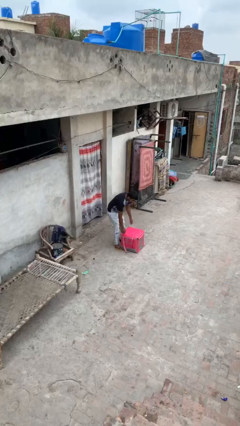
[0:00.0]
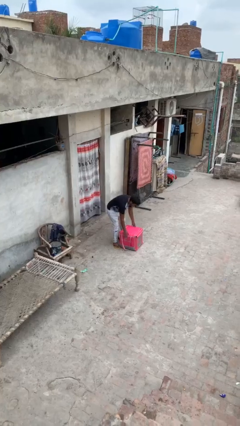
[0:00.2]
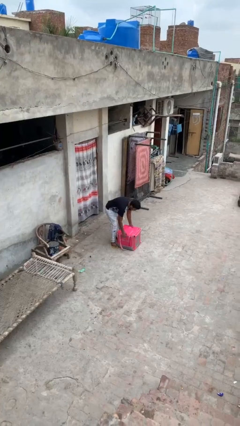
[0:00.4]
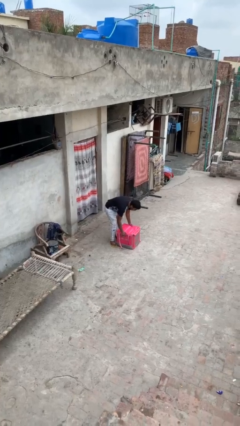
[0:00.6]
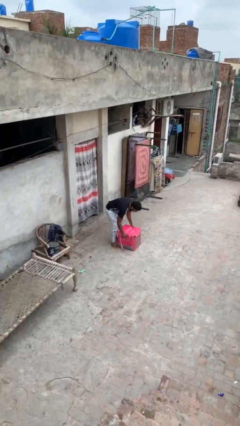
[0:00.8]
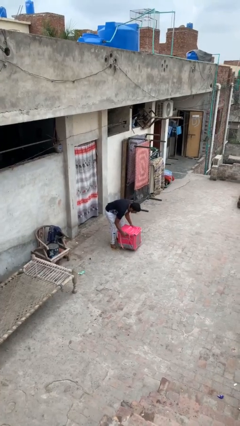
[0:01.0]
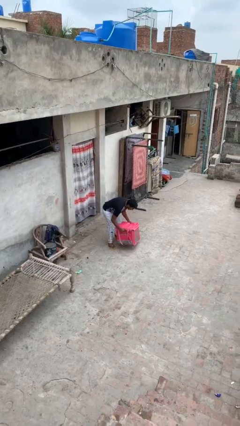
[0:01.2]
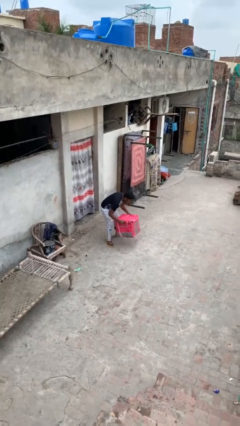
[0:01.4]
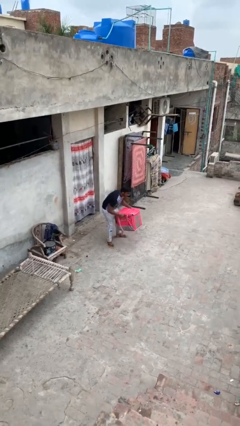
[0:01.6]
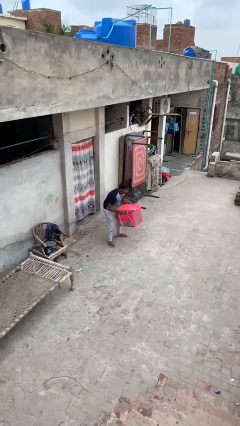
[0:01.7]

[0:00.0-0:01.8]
person picks up object from floor

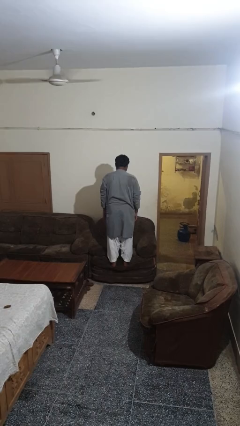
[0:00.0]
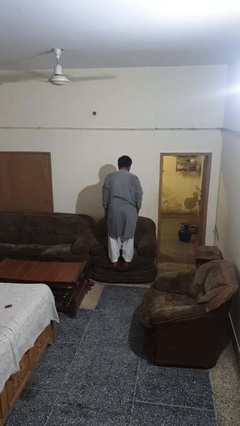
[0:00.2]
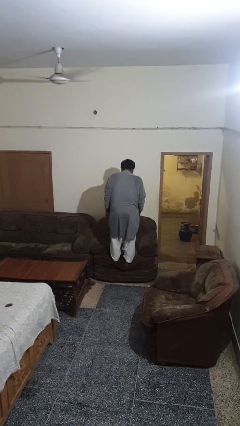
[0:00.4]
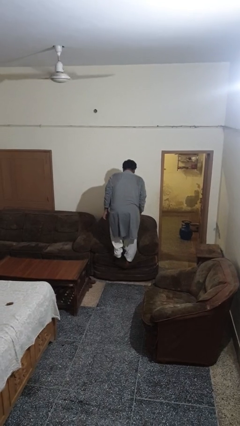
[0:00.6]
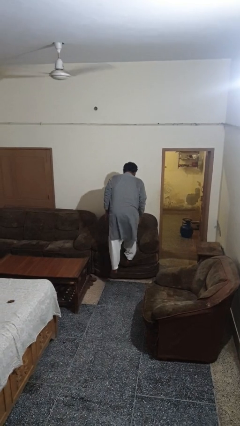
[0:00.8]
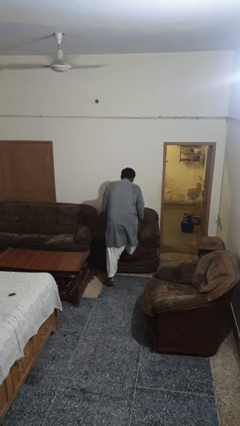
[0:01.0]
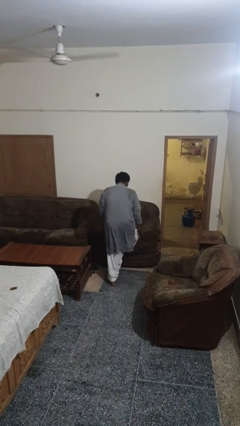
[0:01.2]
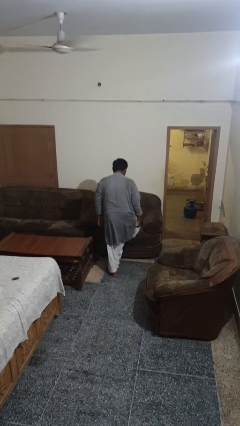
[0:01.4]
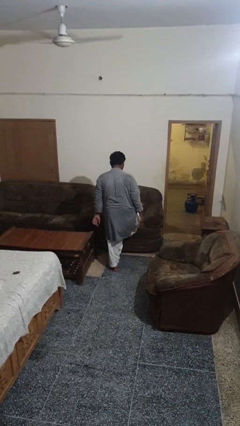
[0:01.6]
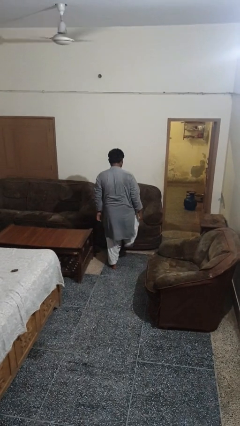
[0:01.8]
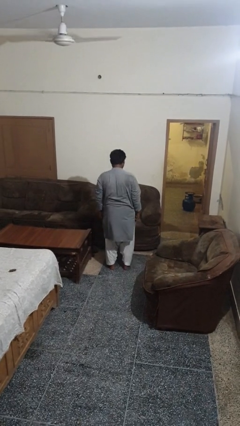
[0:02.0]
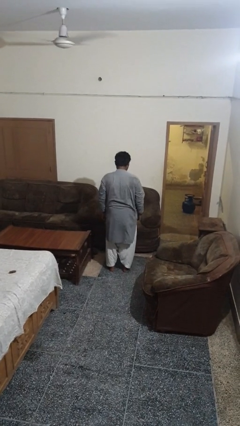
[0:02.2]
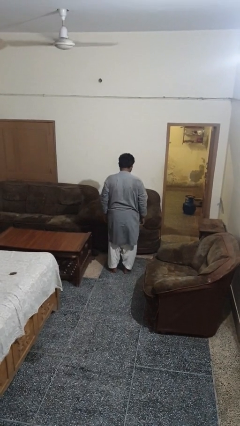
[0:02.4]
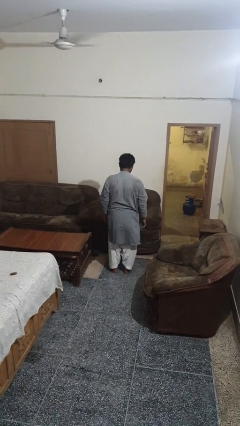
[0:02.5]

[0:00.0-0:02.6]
person climbs off couch

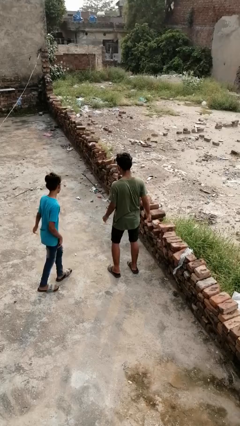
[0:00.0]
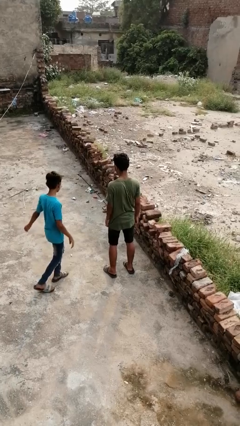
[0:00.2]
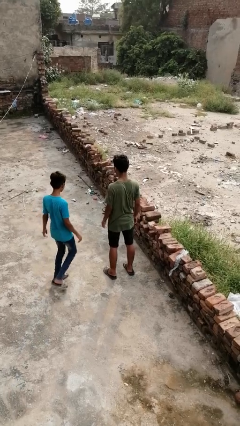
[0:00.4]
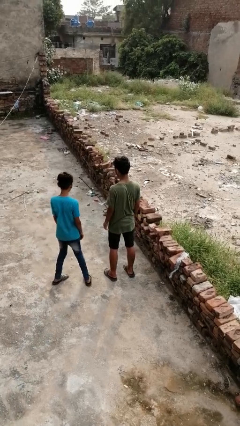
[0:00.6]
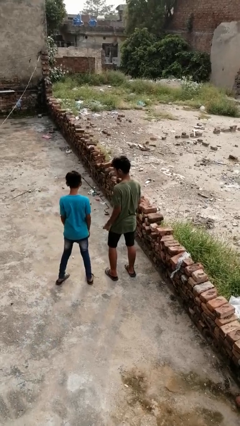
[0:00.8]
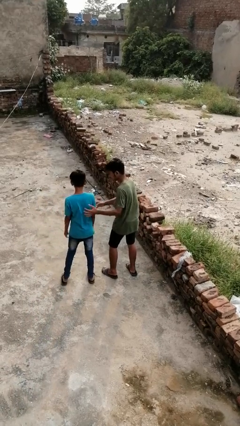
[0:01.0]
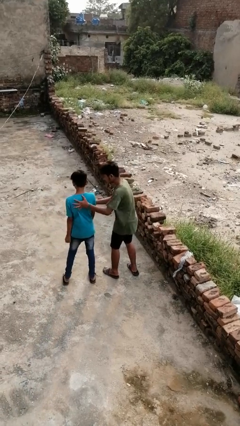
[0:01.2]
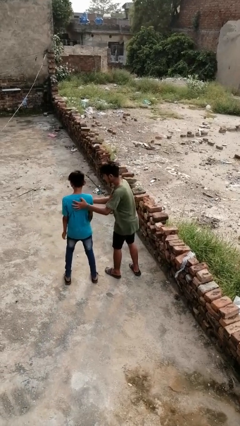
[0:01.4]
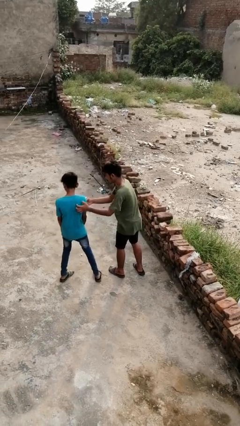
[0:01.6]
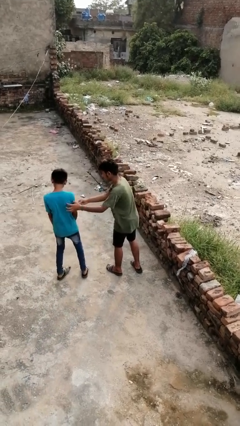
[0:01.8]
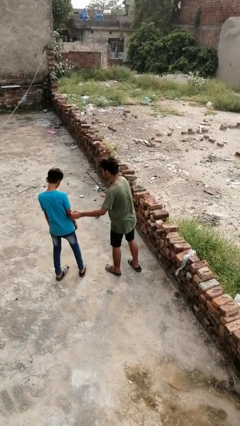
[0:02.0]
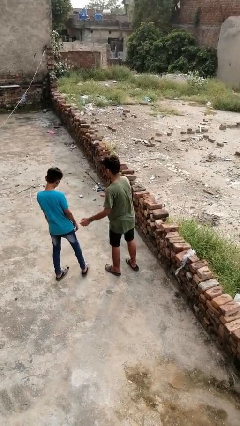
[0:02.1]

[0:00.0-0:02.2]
person tickles person

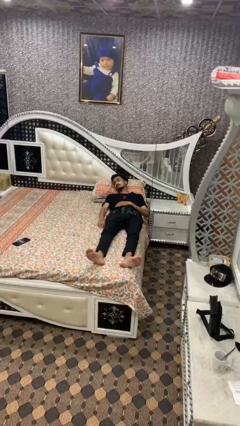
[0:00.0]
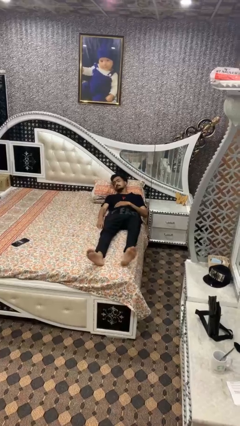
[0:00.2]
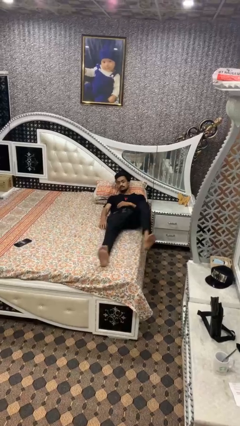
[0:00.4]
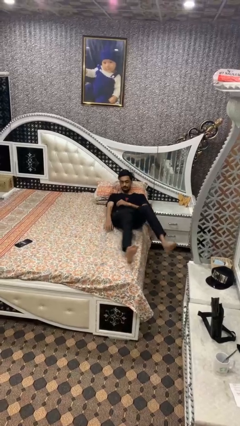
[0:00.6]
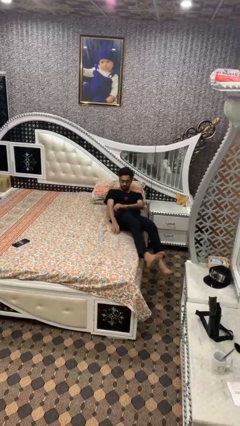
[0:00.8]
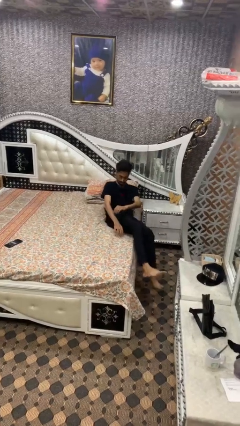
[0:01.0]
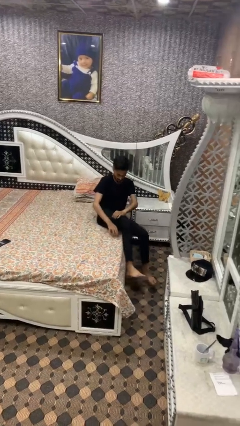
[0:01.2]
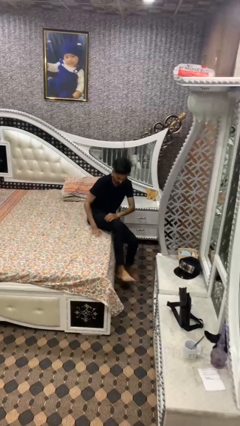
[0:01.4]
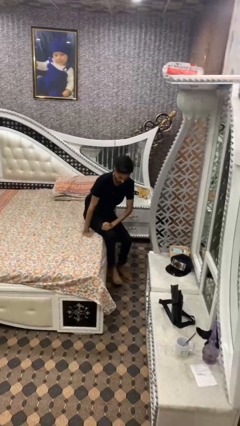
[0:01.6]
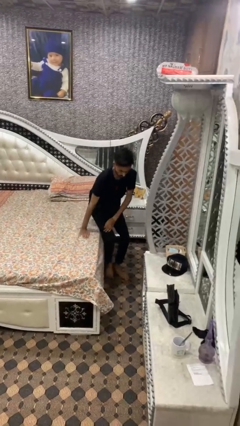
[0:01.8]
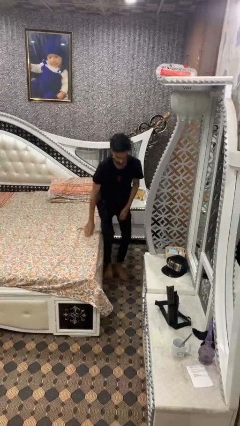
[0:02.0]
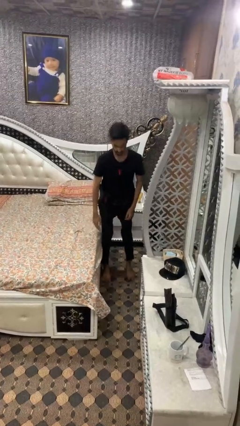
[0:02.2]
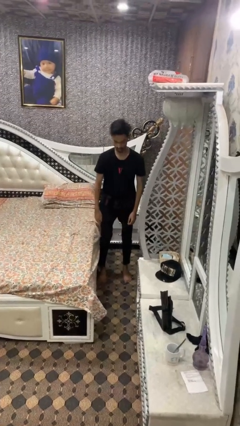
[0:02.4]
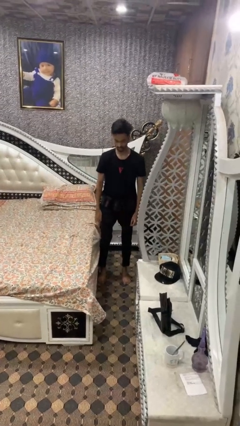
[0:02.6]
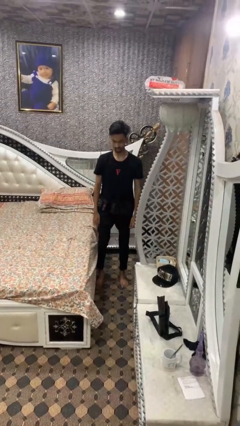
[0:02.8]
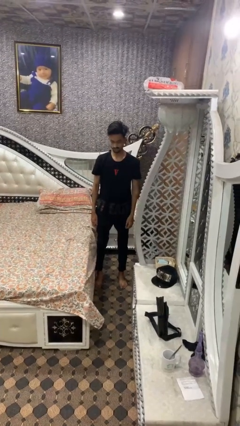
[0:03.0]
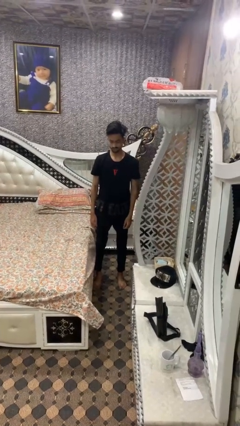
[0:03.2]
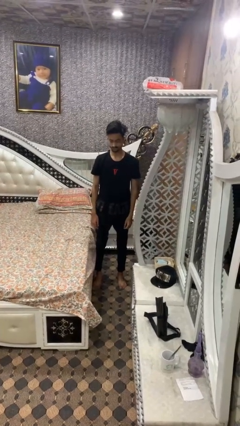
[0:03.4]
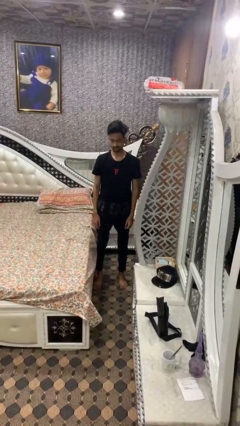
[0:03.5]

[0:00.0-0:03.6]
person stands up

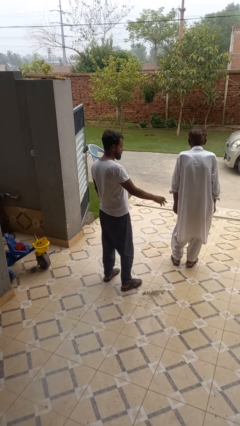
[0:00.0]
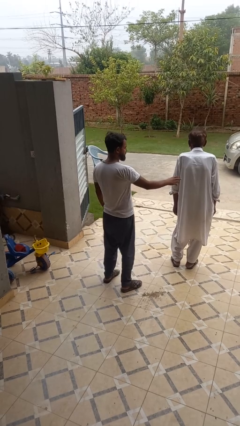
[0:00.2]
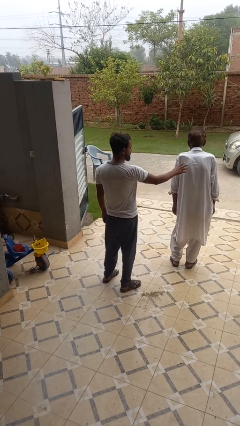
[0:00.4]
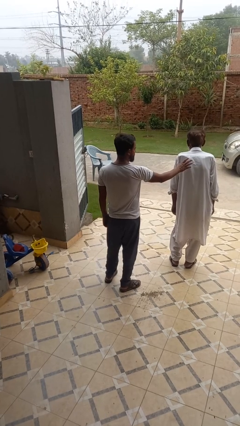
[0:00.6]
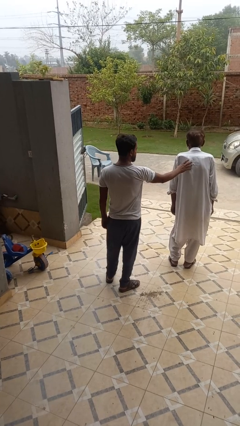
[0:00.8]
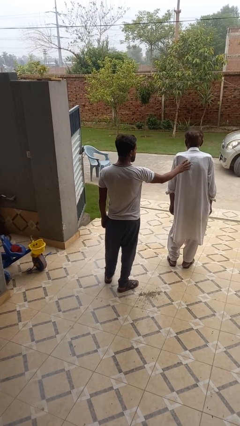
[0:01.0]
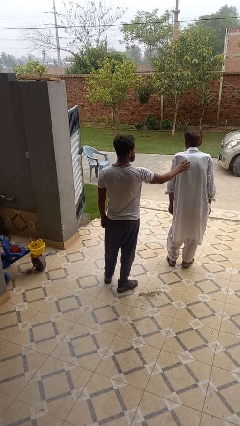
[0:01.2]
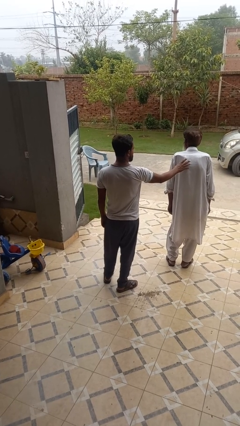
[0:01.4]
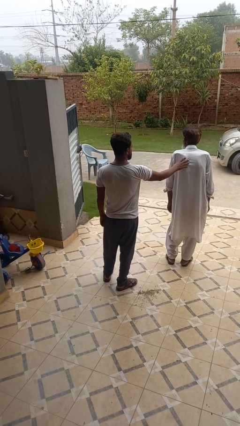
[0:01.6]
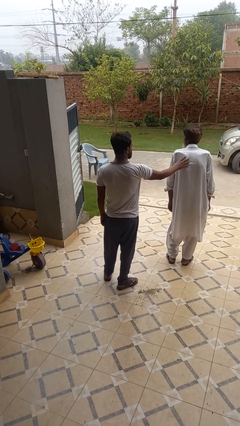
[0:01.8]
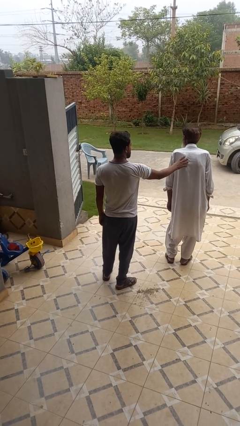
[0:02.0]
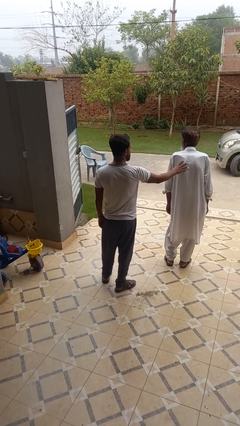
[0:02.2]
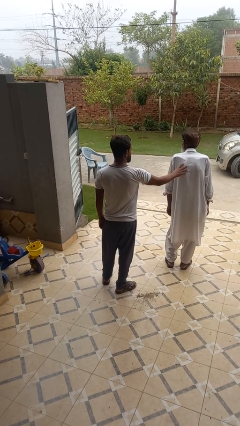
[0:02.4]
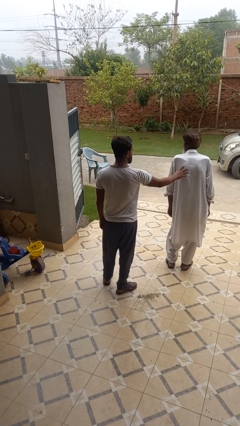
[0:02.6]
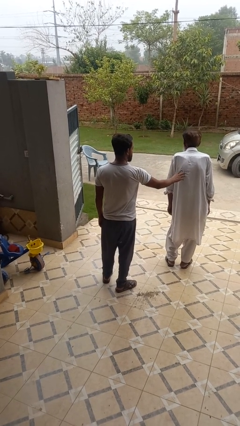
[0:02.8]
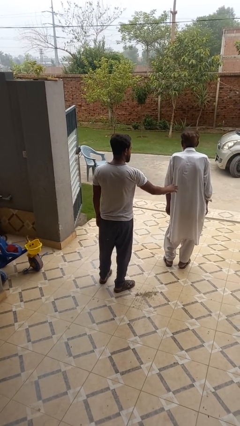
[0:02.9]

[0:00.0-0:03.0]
person touches back of person

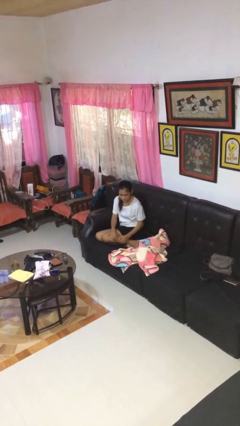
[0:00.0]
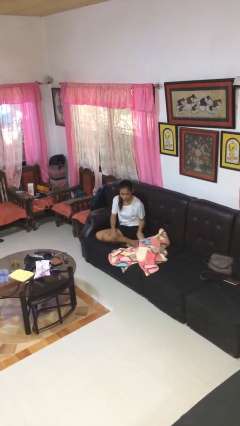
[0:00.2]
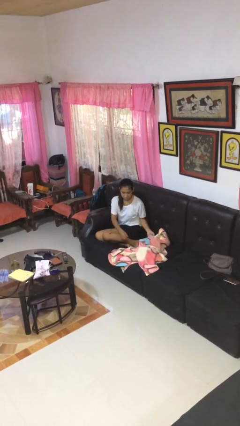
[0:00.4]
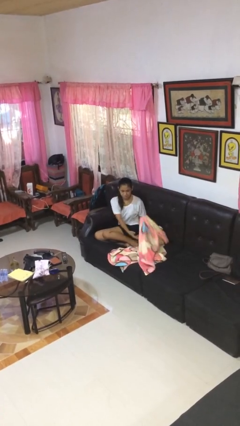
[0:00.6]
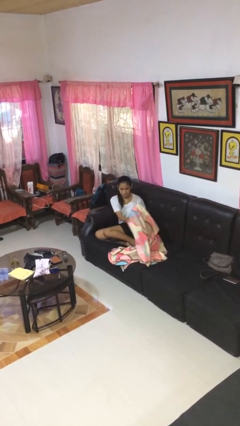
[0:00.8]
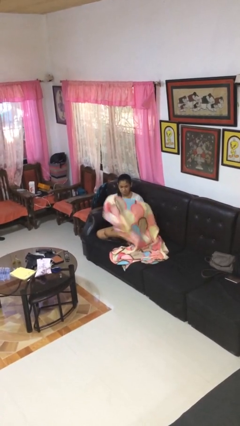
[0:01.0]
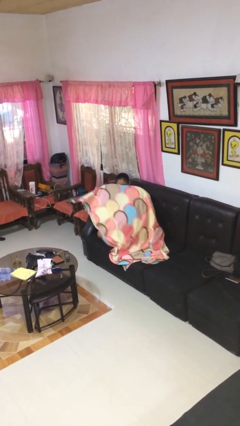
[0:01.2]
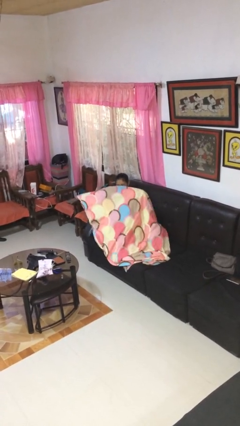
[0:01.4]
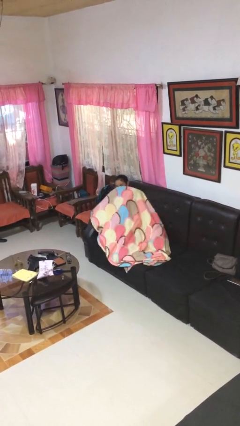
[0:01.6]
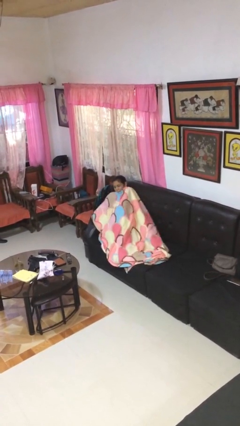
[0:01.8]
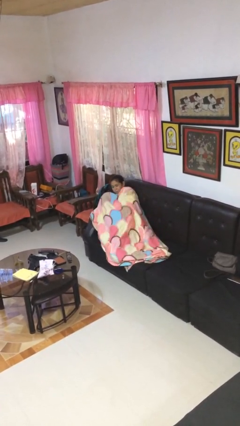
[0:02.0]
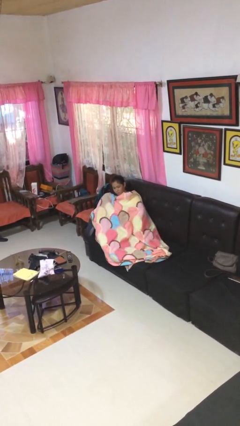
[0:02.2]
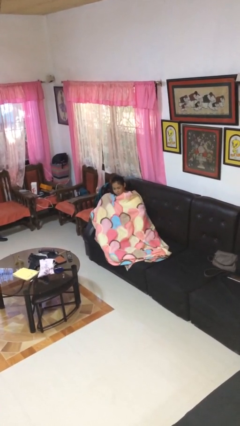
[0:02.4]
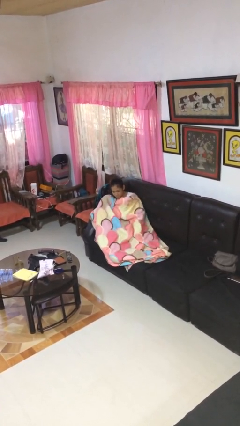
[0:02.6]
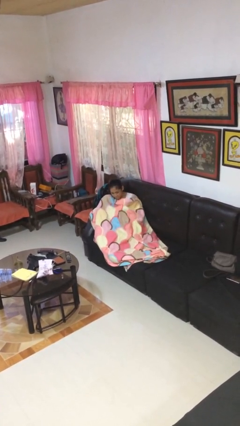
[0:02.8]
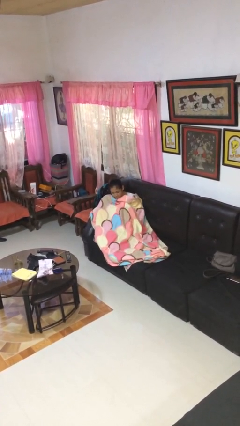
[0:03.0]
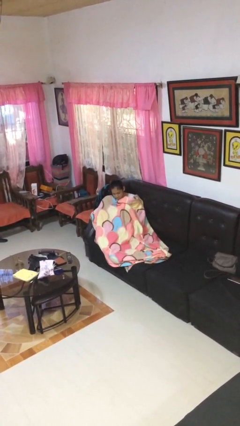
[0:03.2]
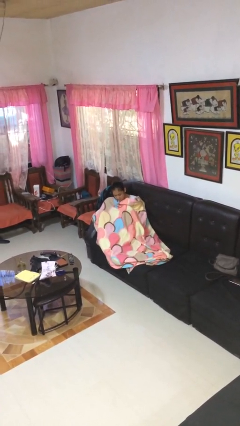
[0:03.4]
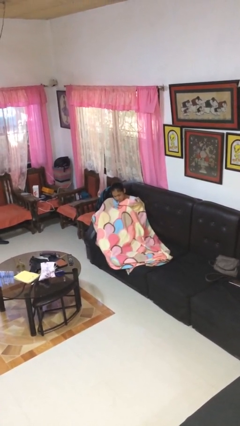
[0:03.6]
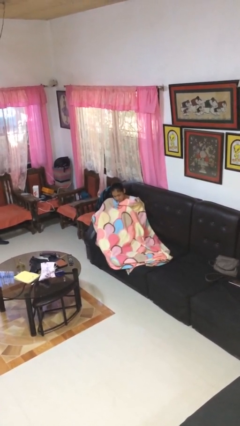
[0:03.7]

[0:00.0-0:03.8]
person covers with blanket

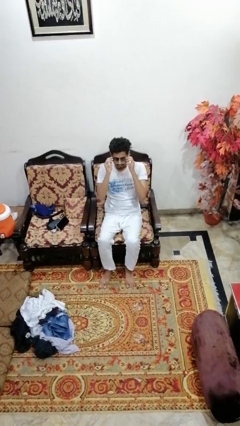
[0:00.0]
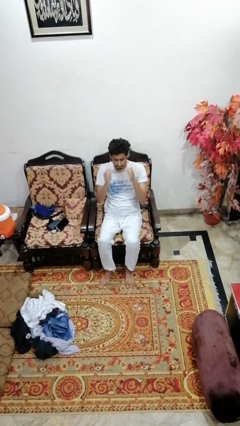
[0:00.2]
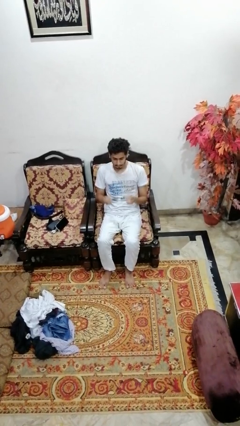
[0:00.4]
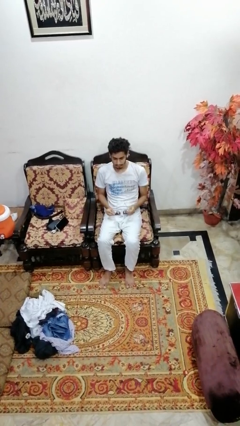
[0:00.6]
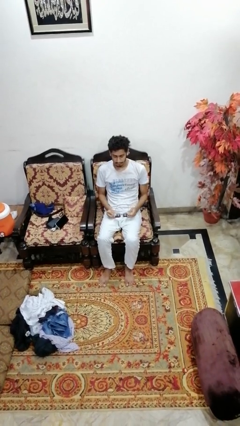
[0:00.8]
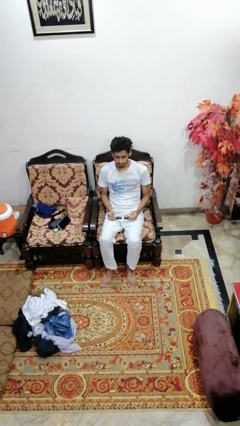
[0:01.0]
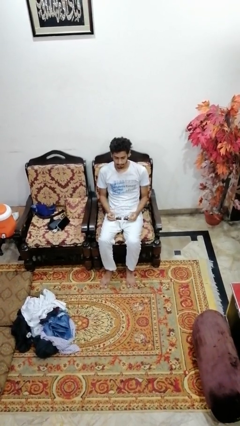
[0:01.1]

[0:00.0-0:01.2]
person takes off sunglasses
